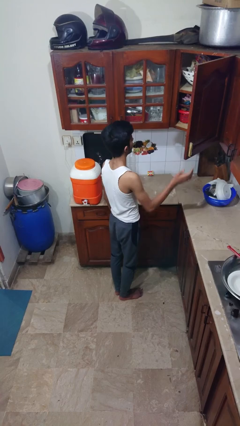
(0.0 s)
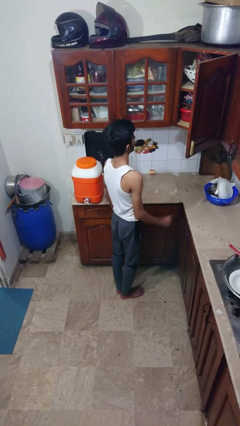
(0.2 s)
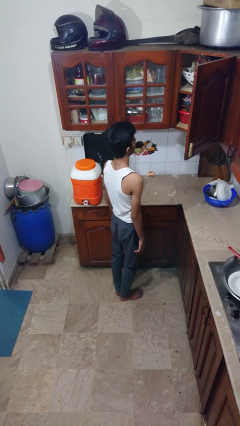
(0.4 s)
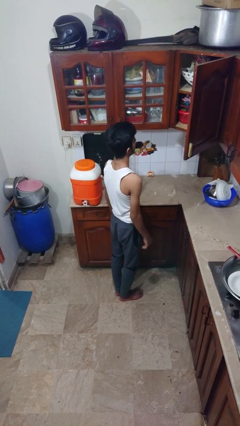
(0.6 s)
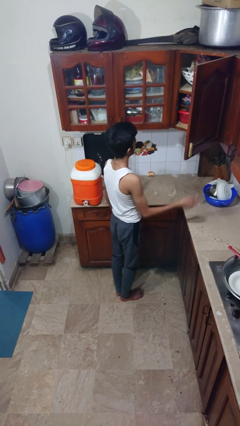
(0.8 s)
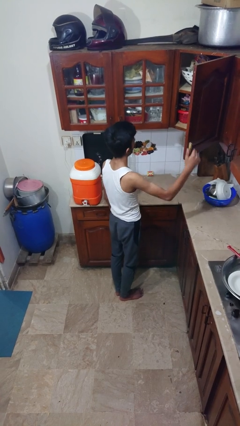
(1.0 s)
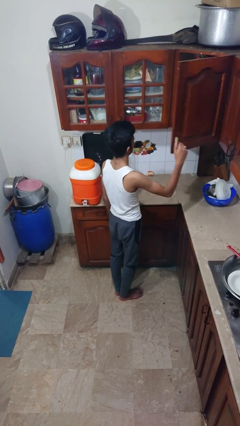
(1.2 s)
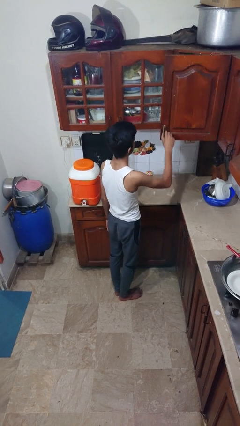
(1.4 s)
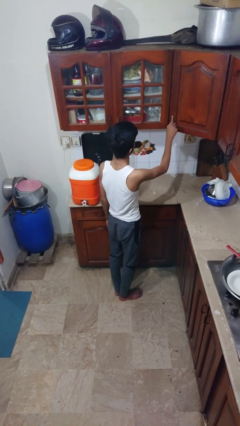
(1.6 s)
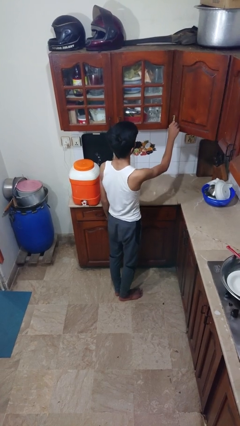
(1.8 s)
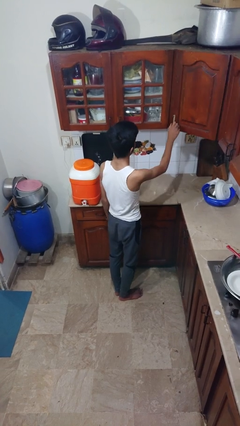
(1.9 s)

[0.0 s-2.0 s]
person closes cabinet

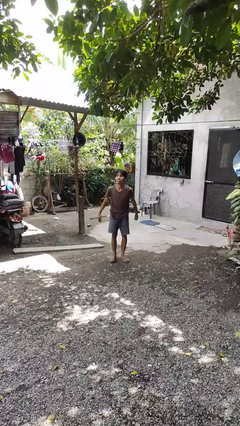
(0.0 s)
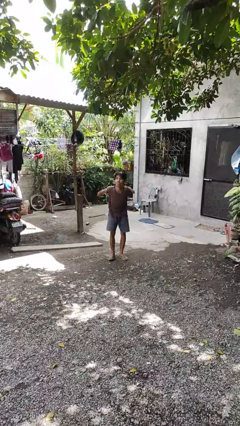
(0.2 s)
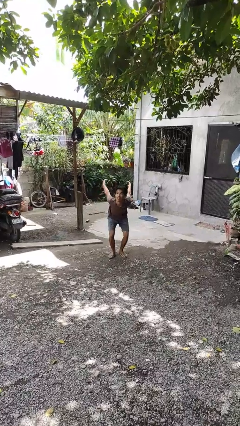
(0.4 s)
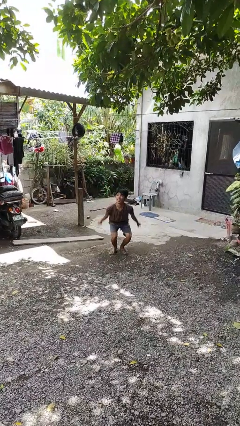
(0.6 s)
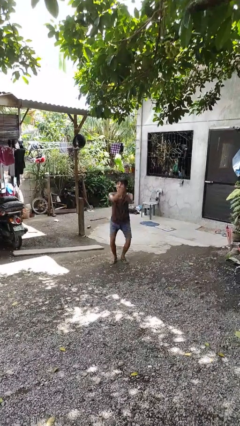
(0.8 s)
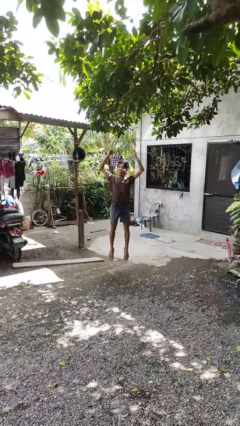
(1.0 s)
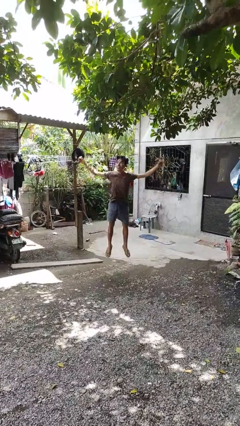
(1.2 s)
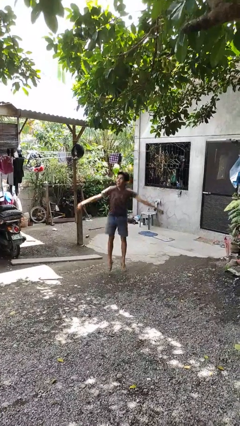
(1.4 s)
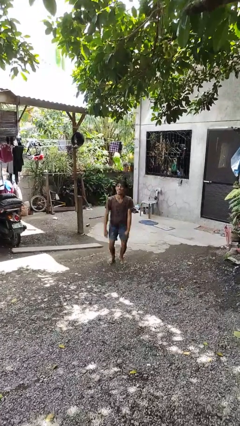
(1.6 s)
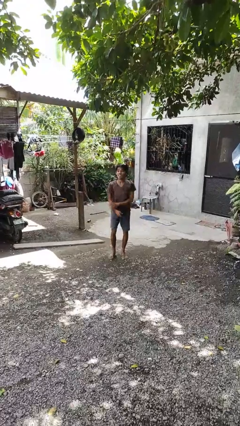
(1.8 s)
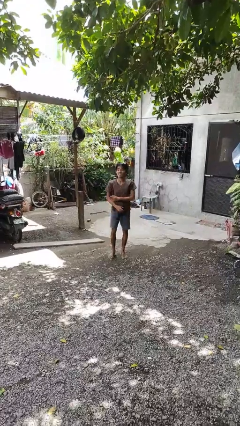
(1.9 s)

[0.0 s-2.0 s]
person jumps

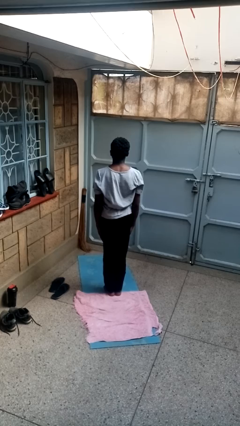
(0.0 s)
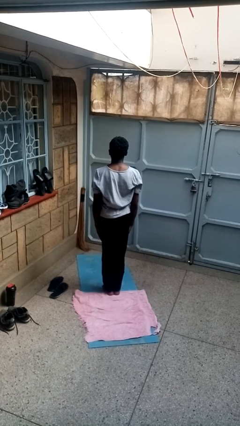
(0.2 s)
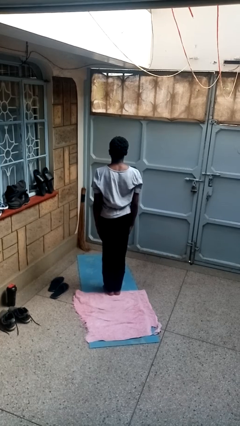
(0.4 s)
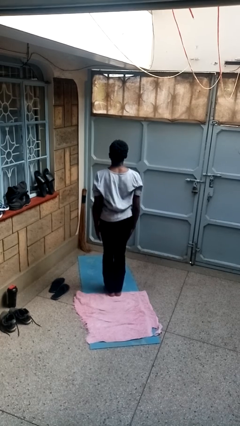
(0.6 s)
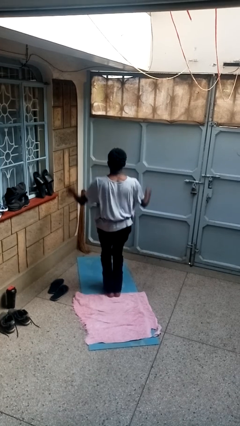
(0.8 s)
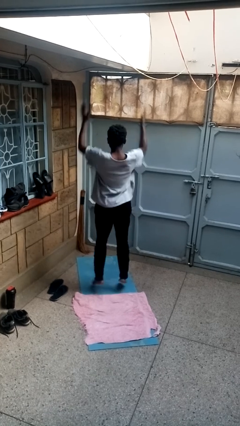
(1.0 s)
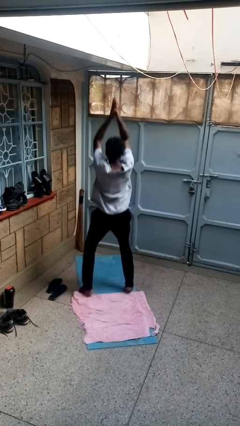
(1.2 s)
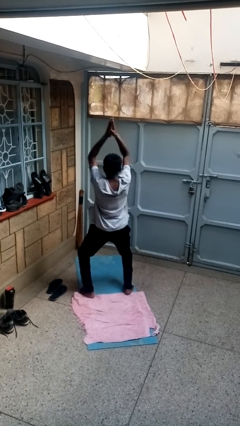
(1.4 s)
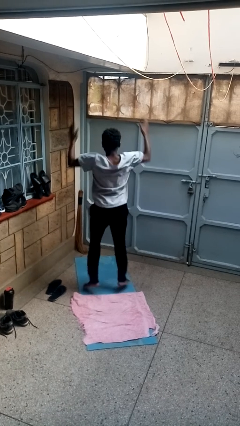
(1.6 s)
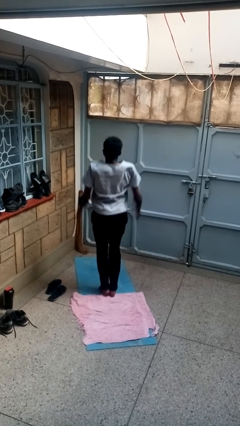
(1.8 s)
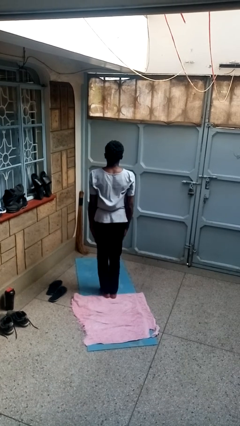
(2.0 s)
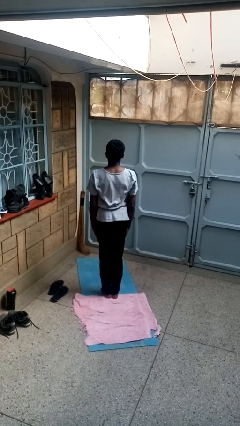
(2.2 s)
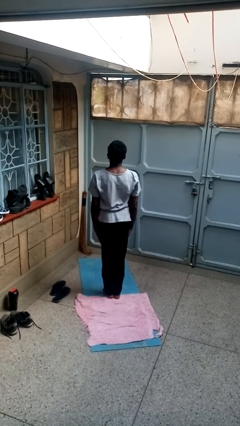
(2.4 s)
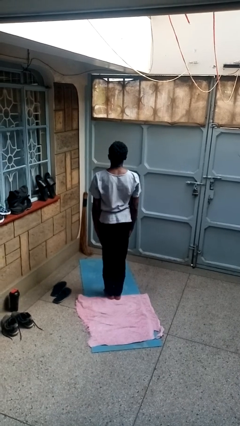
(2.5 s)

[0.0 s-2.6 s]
person exercises with jumping jacks

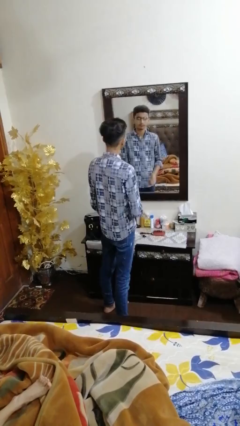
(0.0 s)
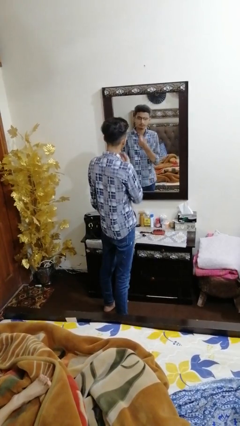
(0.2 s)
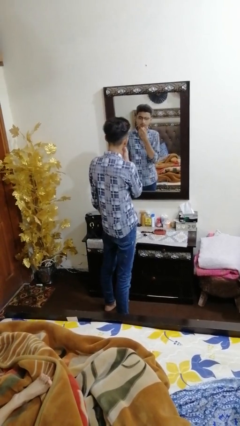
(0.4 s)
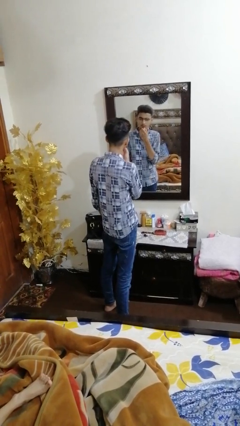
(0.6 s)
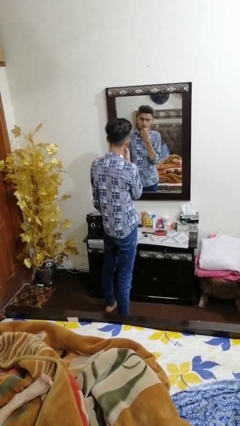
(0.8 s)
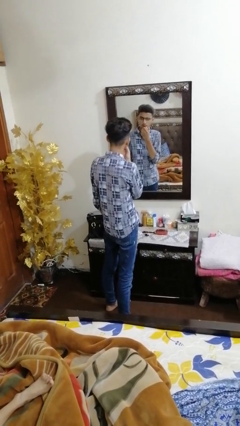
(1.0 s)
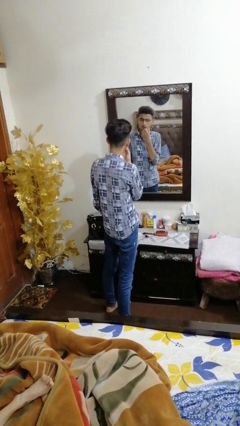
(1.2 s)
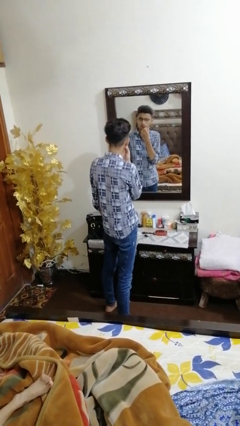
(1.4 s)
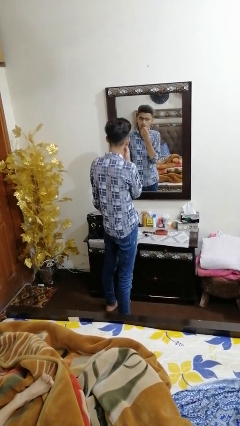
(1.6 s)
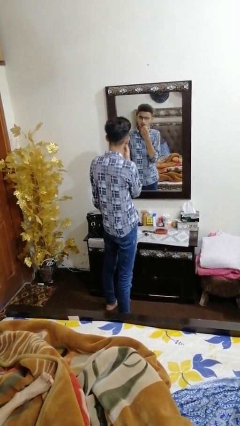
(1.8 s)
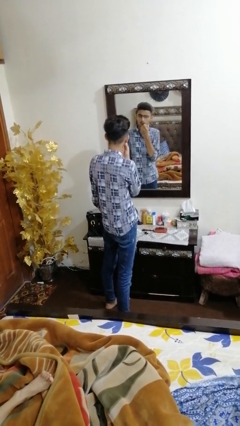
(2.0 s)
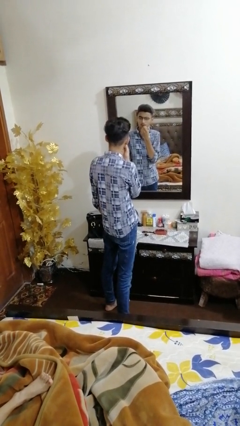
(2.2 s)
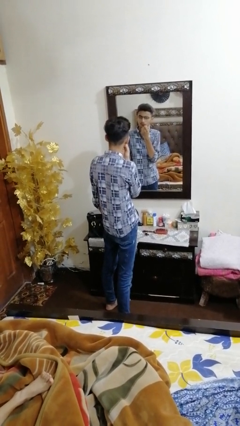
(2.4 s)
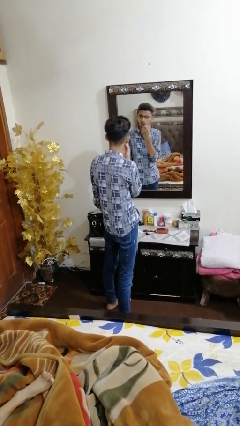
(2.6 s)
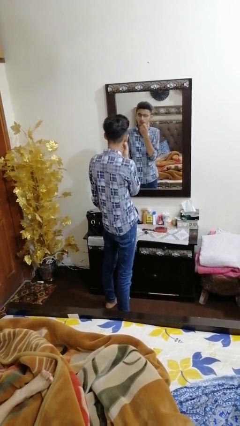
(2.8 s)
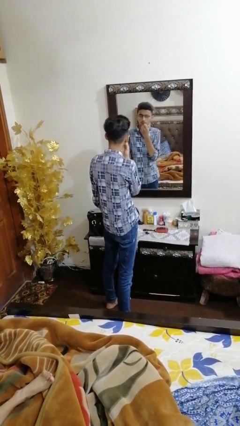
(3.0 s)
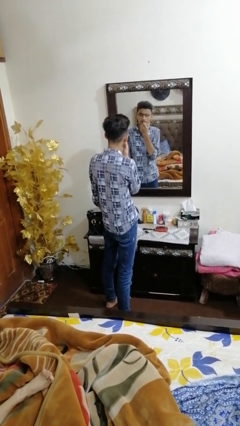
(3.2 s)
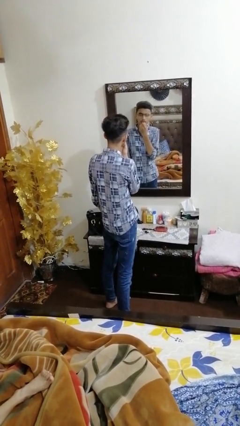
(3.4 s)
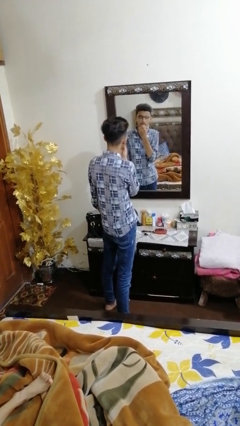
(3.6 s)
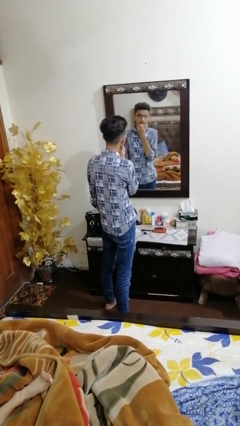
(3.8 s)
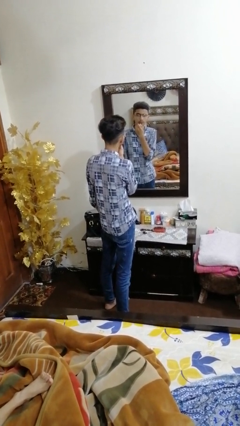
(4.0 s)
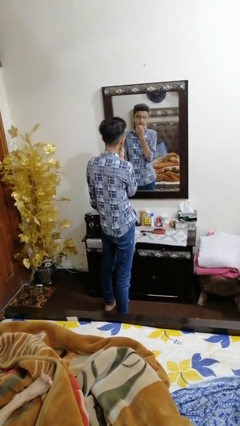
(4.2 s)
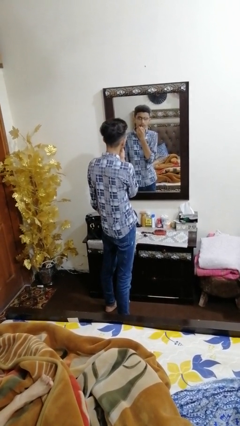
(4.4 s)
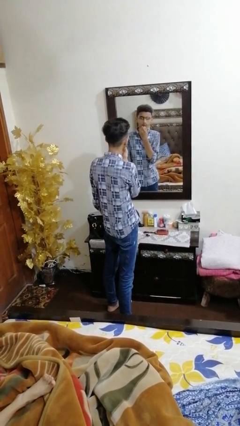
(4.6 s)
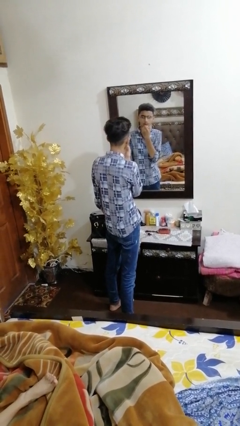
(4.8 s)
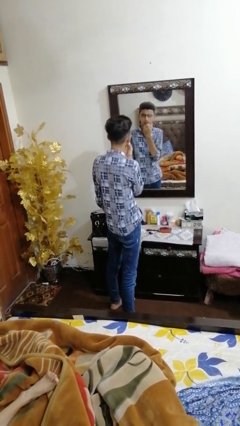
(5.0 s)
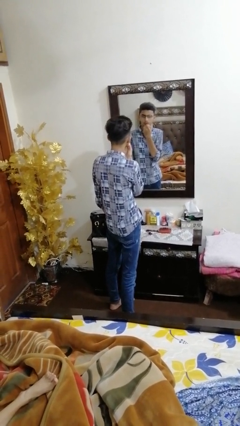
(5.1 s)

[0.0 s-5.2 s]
person applies lip makeup

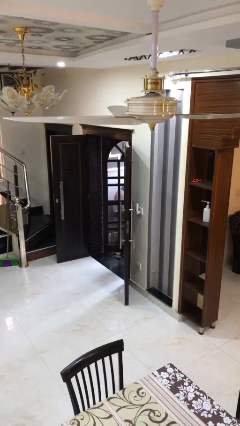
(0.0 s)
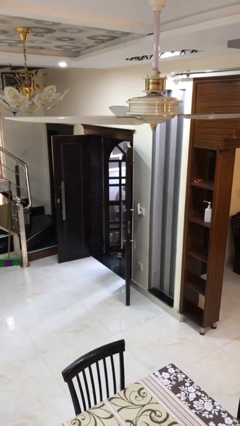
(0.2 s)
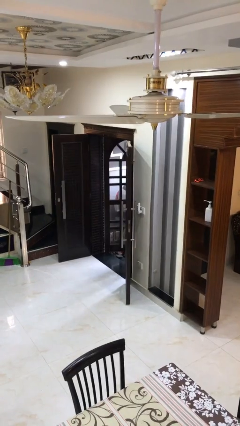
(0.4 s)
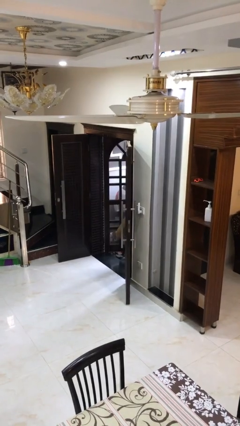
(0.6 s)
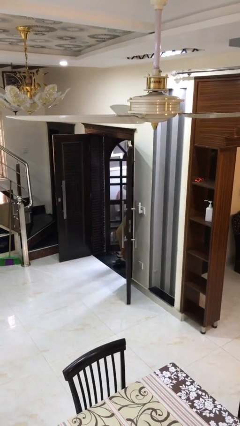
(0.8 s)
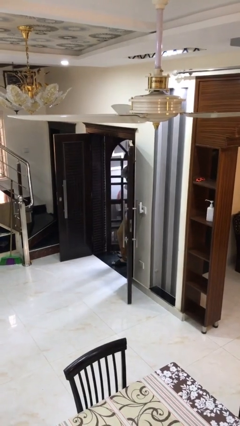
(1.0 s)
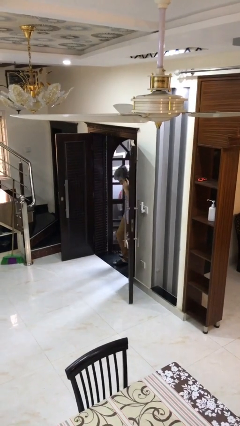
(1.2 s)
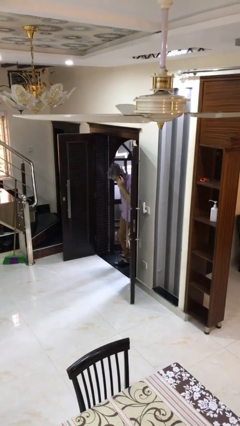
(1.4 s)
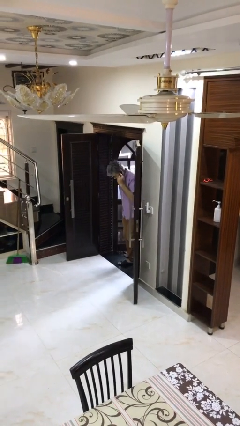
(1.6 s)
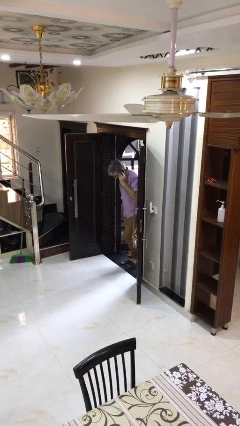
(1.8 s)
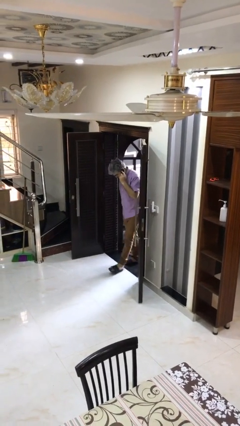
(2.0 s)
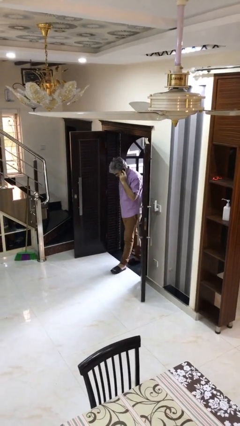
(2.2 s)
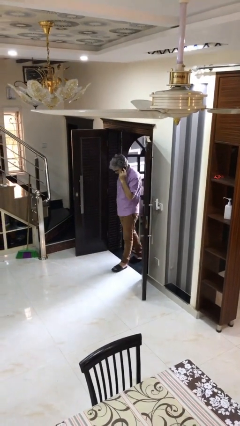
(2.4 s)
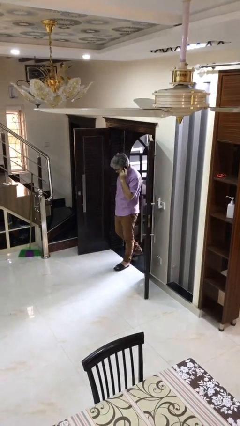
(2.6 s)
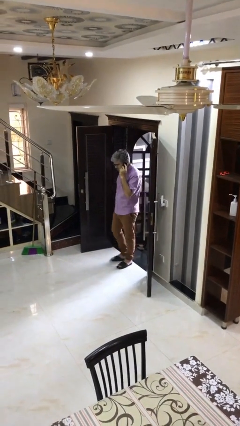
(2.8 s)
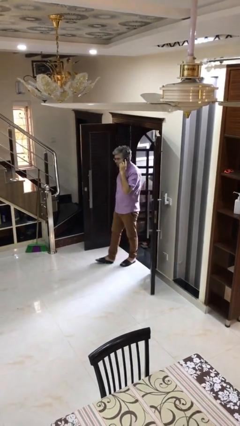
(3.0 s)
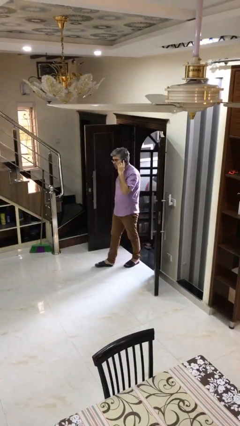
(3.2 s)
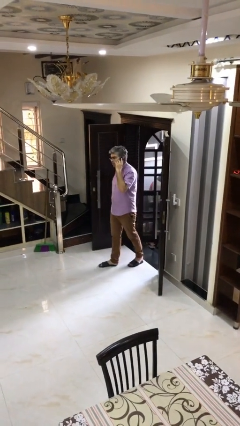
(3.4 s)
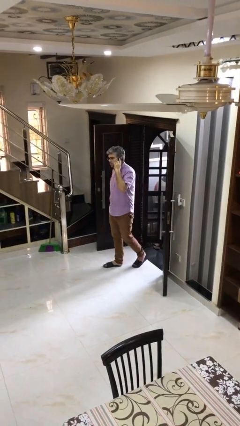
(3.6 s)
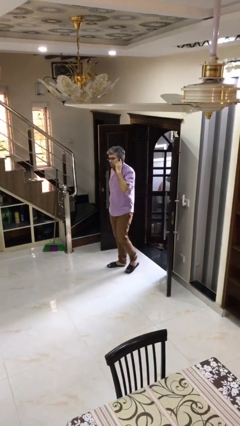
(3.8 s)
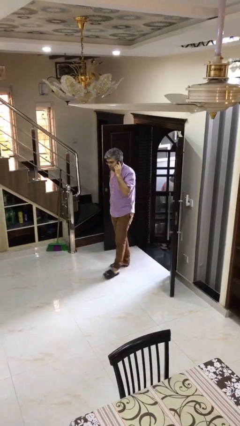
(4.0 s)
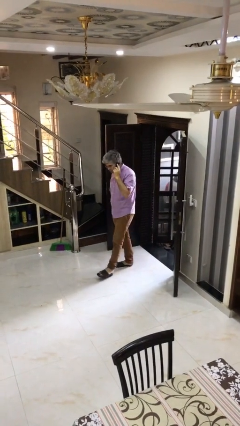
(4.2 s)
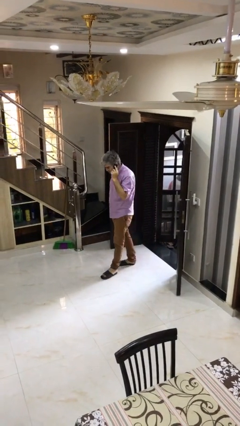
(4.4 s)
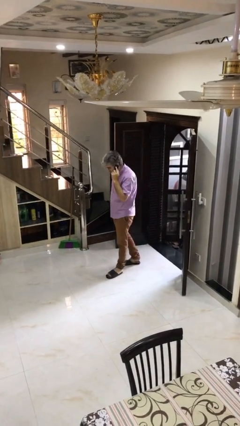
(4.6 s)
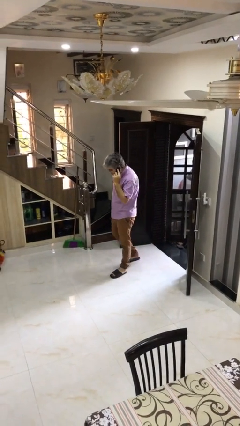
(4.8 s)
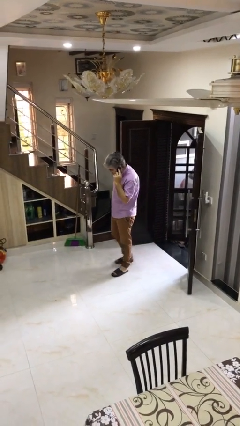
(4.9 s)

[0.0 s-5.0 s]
person enters scene through structure

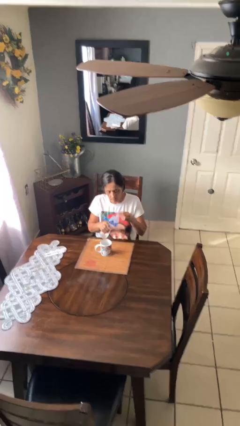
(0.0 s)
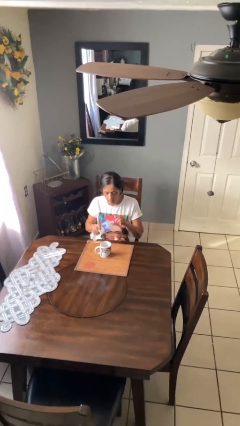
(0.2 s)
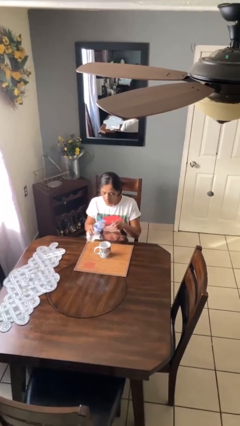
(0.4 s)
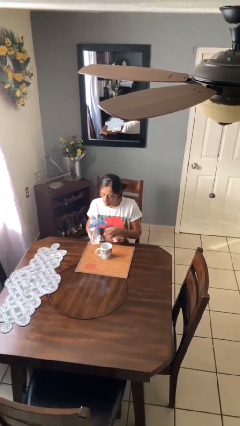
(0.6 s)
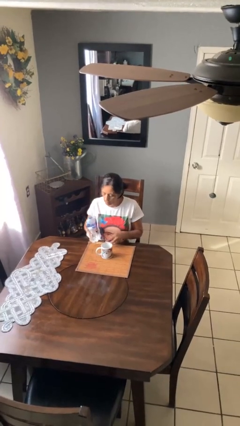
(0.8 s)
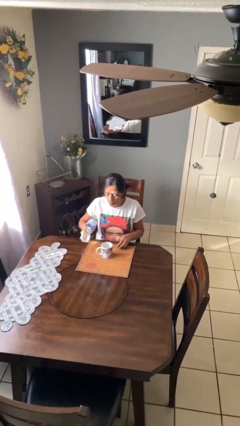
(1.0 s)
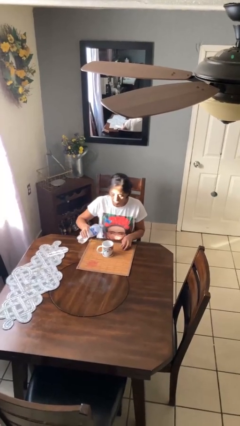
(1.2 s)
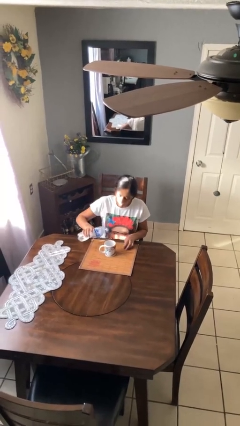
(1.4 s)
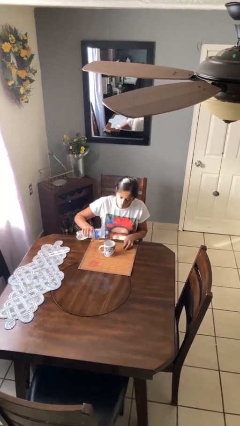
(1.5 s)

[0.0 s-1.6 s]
person unscrews lid from bottle
